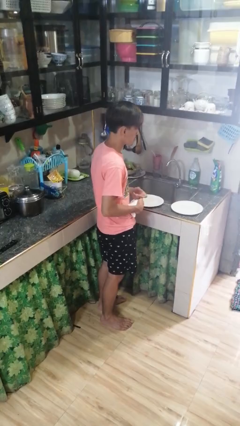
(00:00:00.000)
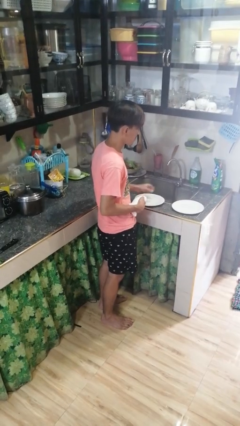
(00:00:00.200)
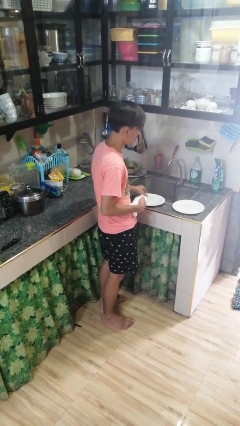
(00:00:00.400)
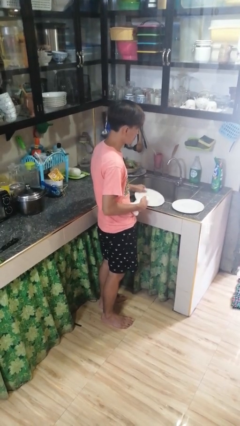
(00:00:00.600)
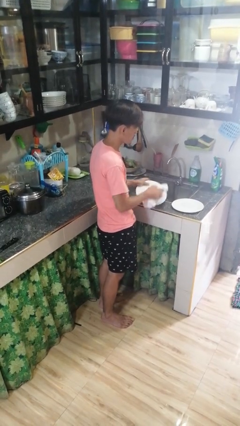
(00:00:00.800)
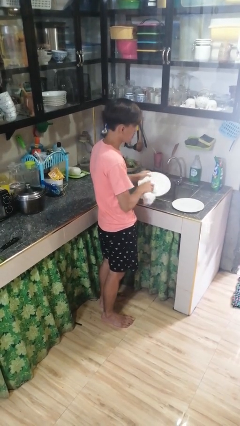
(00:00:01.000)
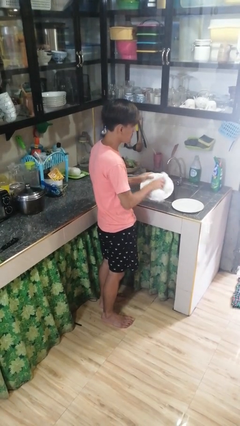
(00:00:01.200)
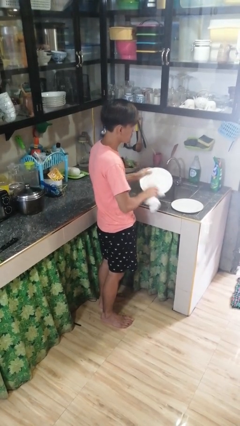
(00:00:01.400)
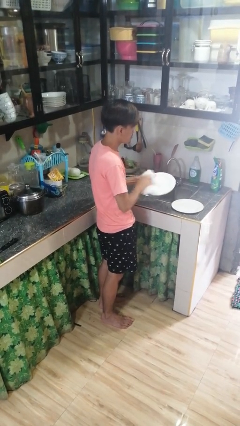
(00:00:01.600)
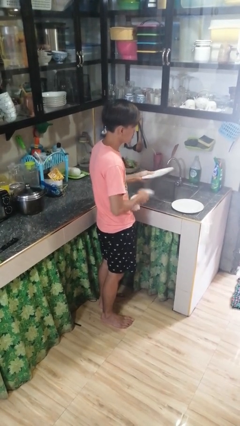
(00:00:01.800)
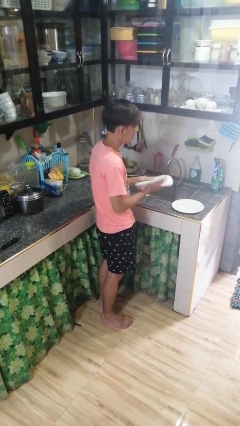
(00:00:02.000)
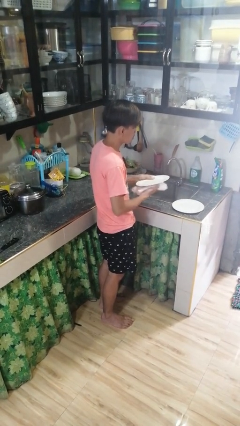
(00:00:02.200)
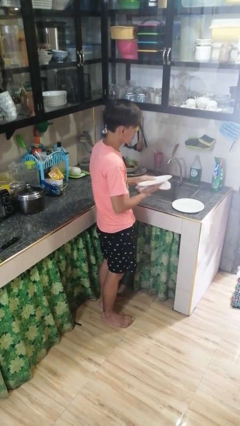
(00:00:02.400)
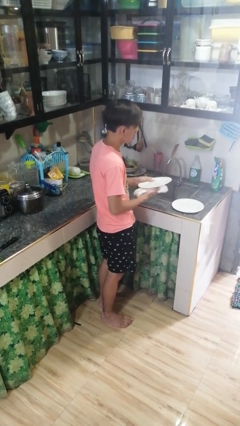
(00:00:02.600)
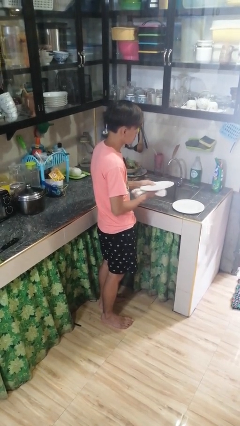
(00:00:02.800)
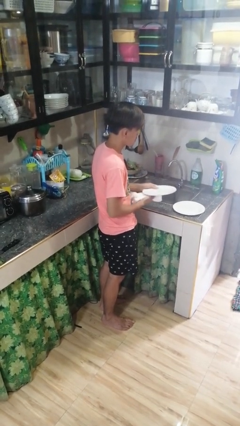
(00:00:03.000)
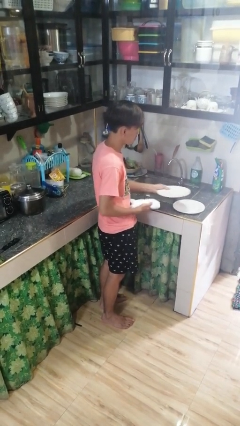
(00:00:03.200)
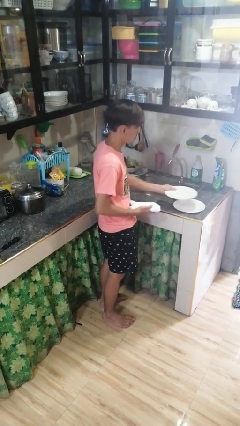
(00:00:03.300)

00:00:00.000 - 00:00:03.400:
person dries dish

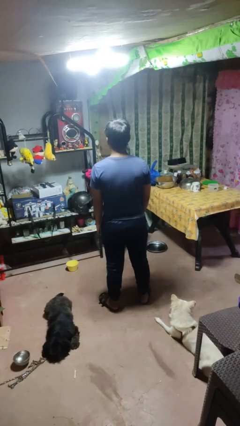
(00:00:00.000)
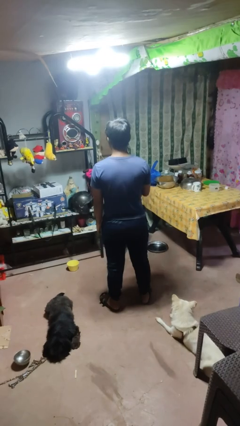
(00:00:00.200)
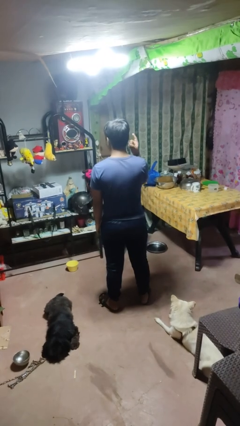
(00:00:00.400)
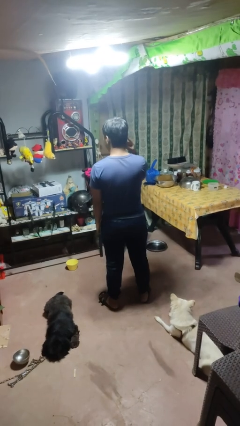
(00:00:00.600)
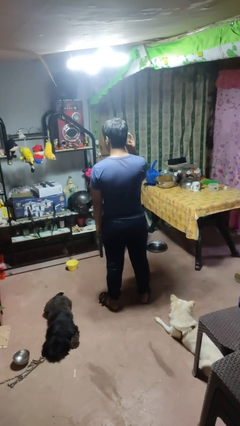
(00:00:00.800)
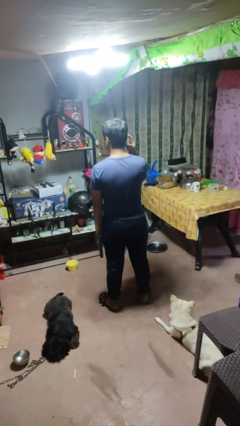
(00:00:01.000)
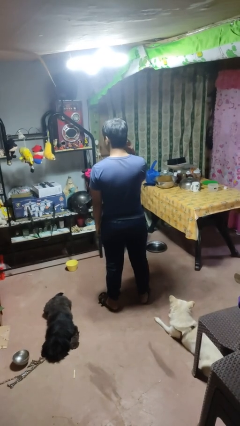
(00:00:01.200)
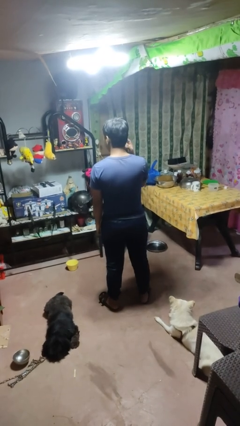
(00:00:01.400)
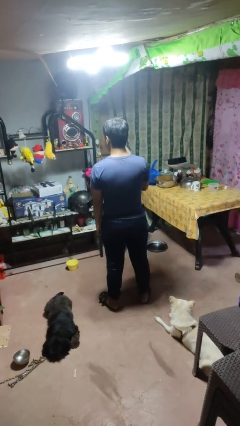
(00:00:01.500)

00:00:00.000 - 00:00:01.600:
person gestures listen closely

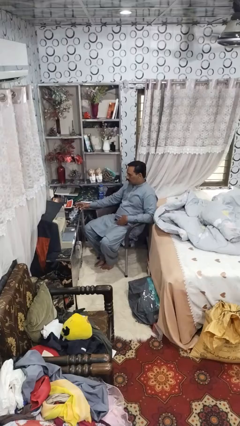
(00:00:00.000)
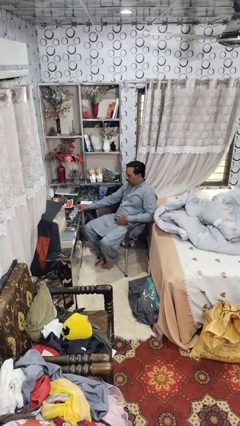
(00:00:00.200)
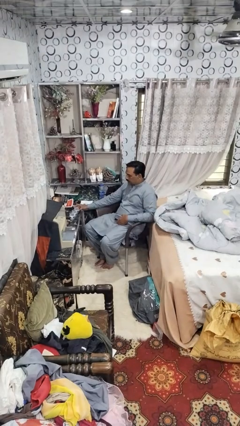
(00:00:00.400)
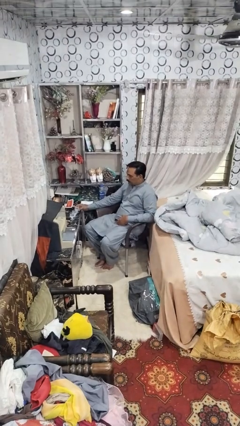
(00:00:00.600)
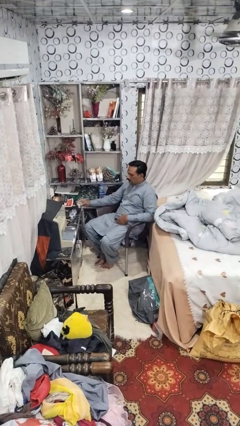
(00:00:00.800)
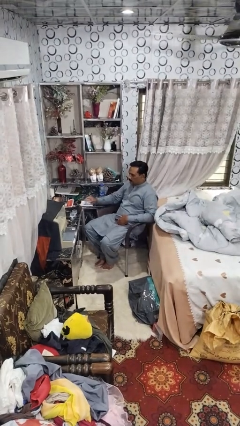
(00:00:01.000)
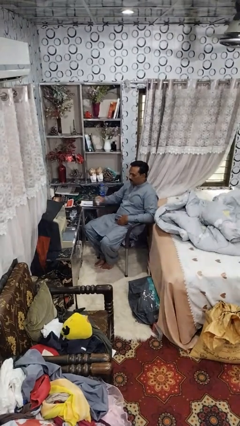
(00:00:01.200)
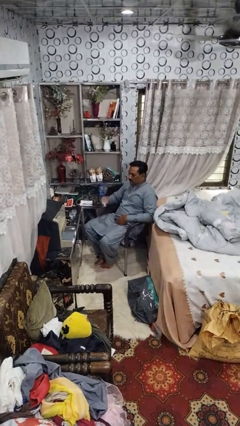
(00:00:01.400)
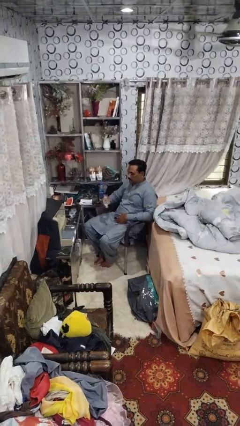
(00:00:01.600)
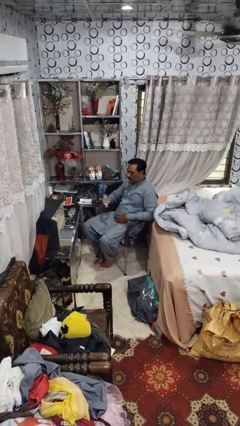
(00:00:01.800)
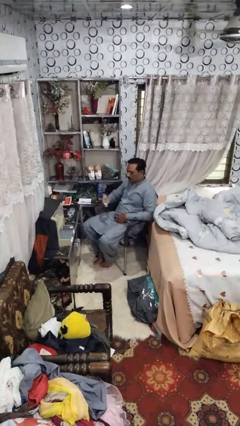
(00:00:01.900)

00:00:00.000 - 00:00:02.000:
person picks up object from table

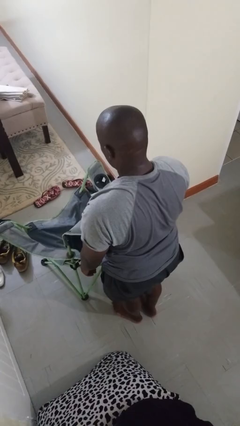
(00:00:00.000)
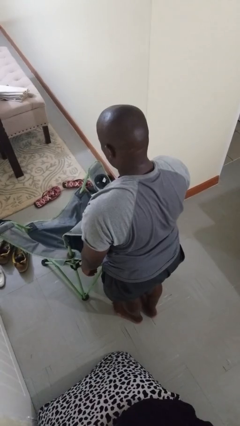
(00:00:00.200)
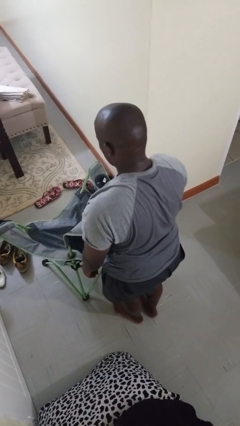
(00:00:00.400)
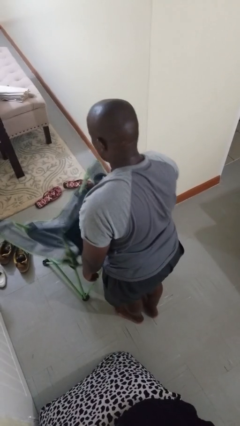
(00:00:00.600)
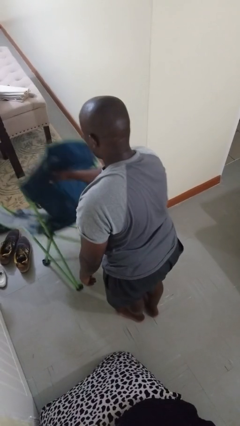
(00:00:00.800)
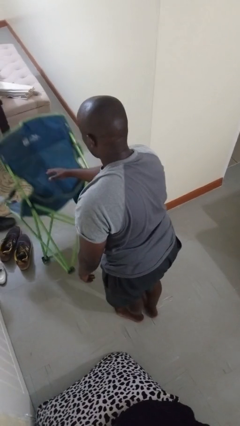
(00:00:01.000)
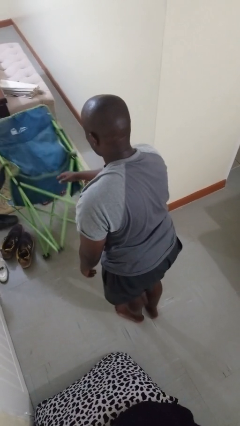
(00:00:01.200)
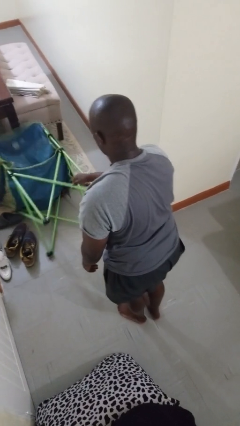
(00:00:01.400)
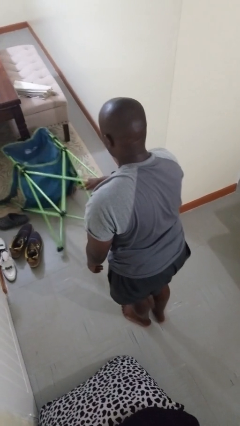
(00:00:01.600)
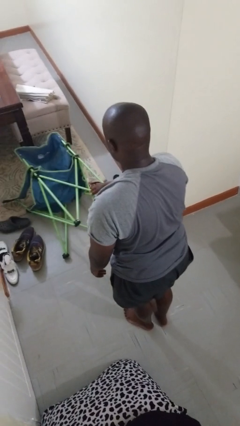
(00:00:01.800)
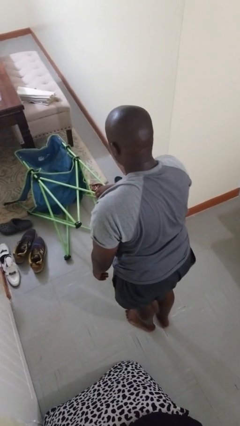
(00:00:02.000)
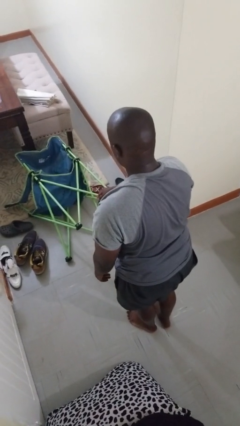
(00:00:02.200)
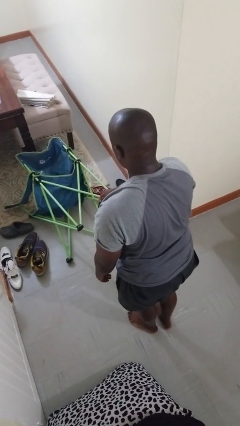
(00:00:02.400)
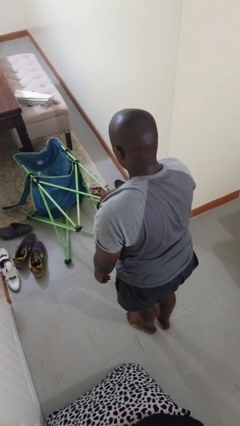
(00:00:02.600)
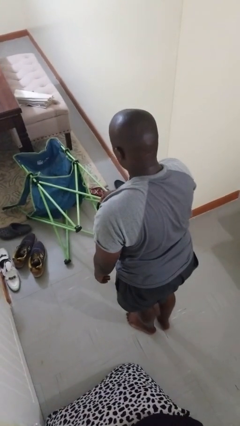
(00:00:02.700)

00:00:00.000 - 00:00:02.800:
person knocks over furniture

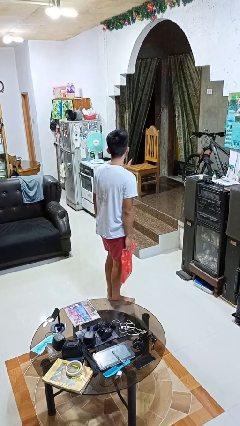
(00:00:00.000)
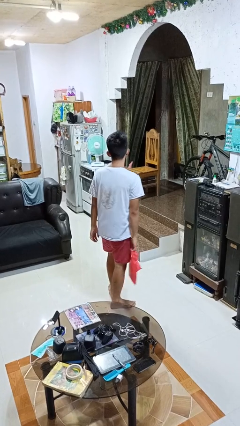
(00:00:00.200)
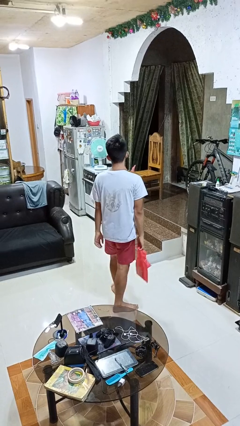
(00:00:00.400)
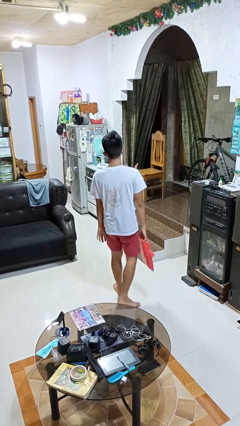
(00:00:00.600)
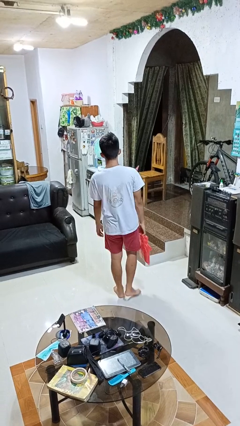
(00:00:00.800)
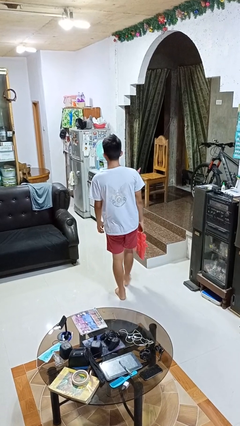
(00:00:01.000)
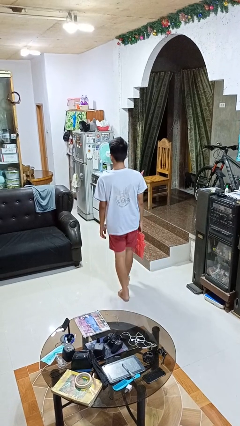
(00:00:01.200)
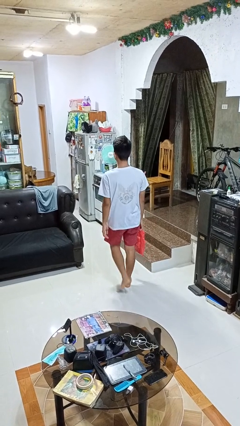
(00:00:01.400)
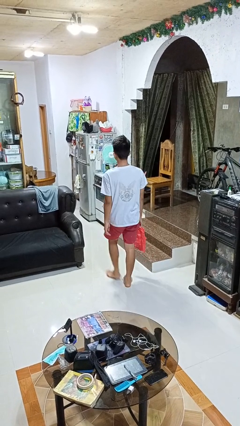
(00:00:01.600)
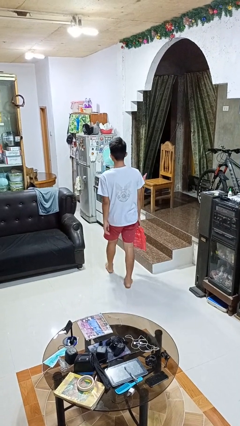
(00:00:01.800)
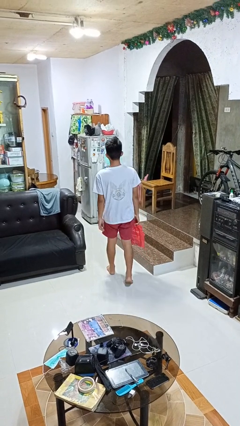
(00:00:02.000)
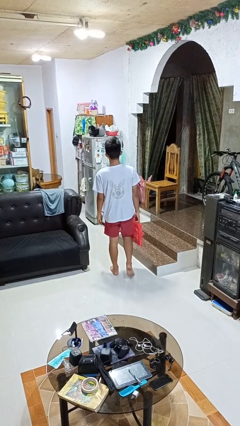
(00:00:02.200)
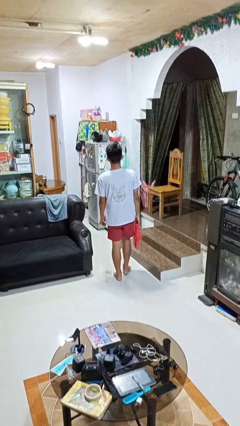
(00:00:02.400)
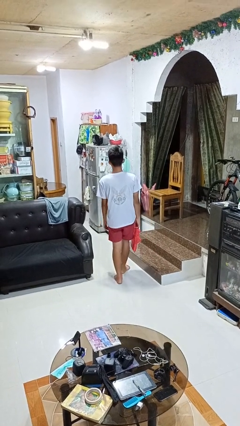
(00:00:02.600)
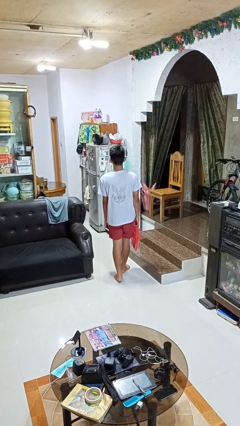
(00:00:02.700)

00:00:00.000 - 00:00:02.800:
person carries groceries

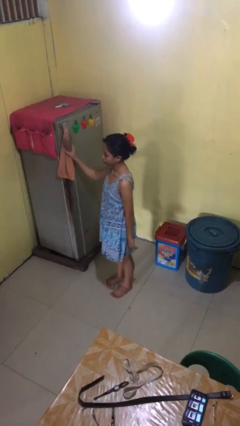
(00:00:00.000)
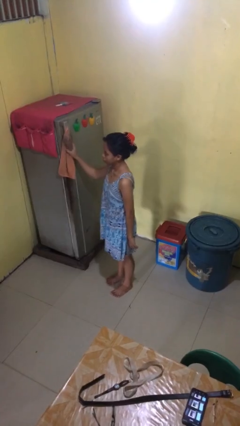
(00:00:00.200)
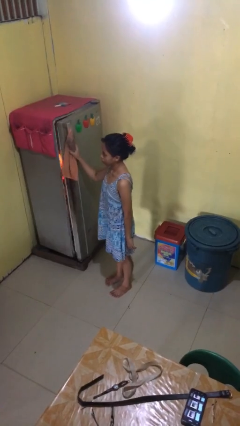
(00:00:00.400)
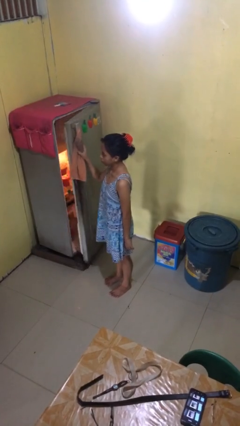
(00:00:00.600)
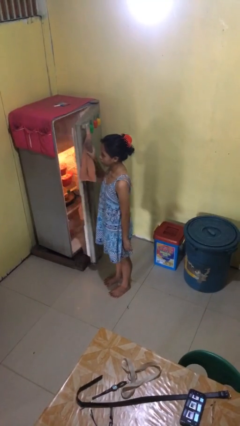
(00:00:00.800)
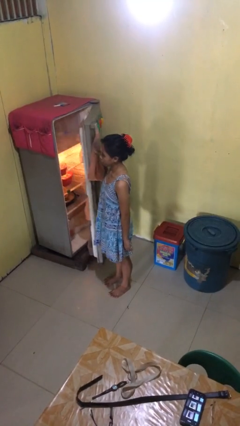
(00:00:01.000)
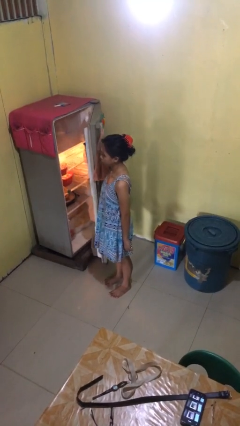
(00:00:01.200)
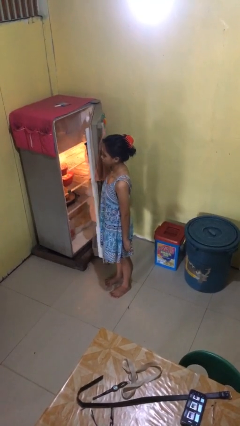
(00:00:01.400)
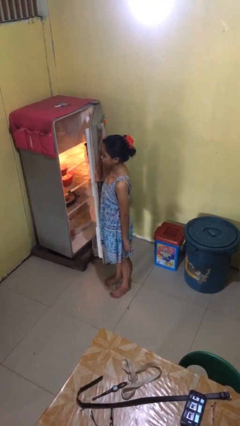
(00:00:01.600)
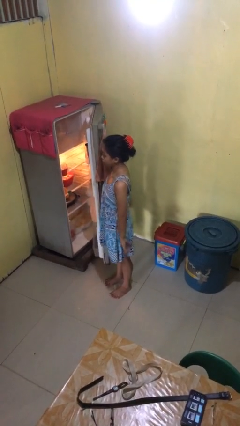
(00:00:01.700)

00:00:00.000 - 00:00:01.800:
person opens refrigerator

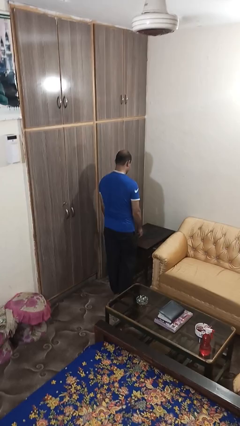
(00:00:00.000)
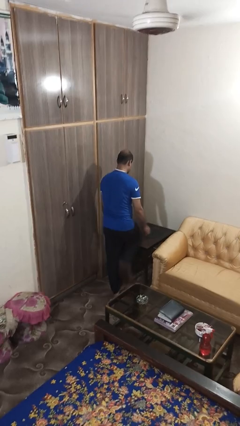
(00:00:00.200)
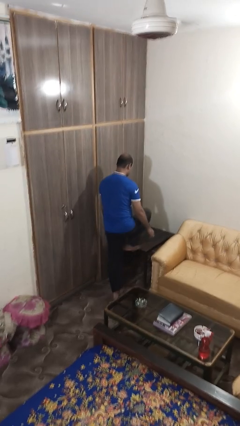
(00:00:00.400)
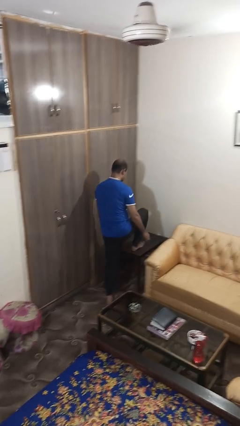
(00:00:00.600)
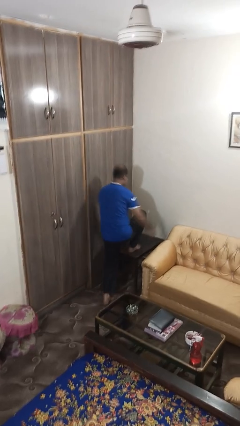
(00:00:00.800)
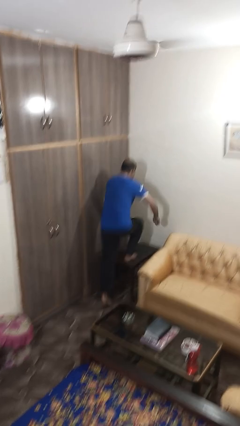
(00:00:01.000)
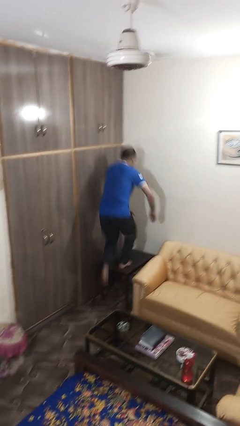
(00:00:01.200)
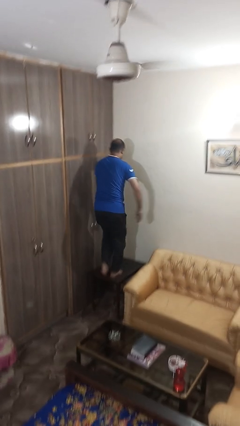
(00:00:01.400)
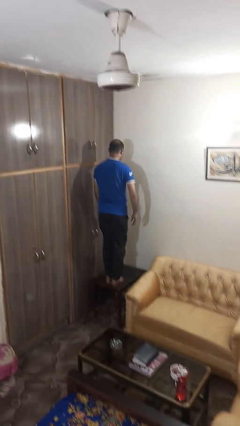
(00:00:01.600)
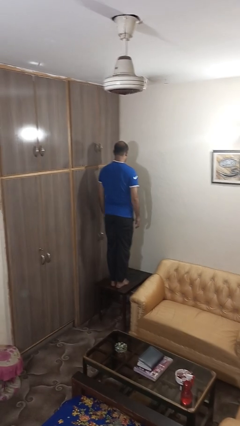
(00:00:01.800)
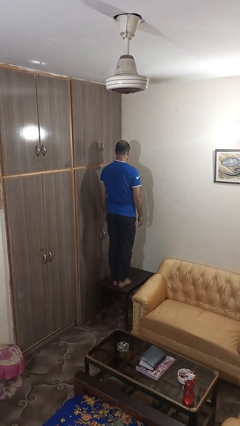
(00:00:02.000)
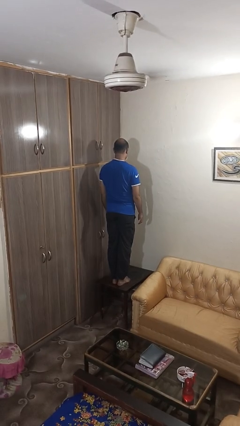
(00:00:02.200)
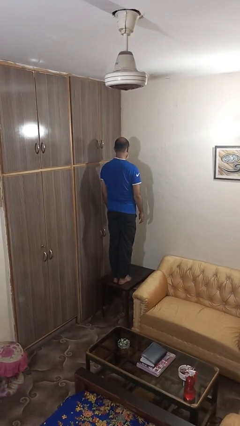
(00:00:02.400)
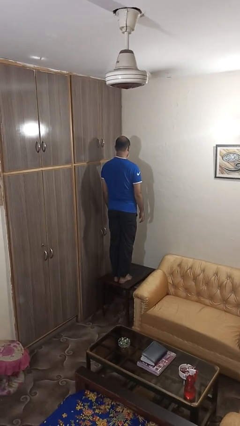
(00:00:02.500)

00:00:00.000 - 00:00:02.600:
person climbs on table
